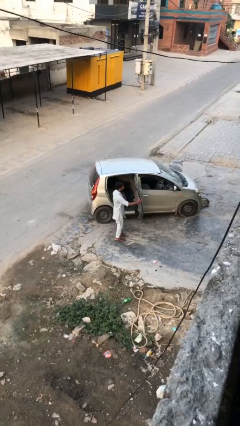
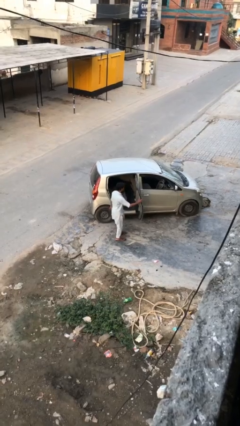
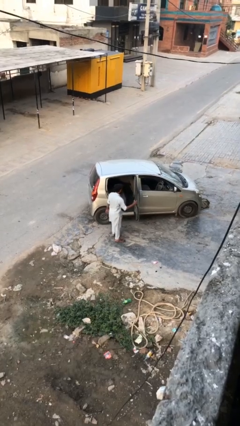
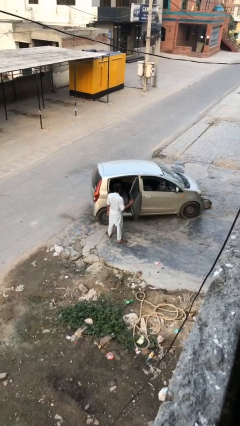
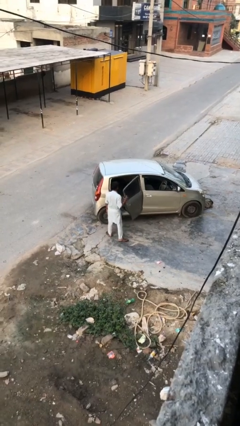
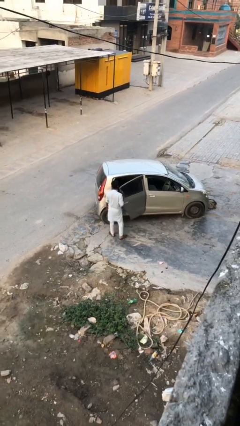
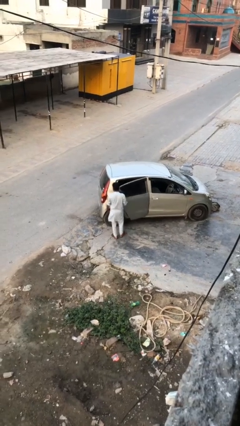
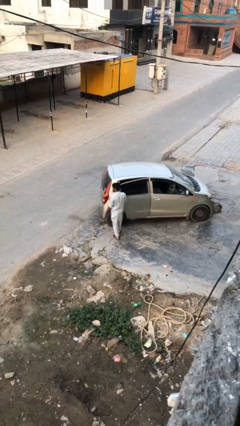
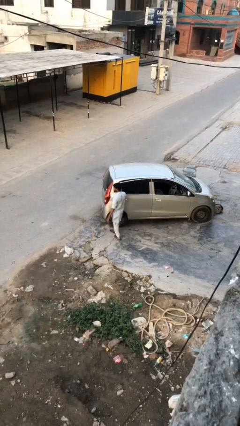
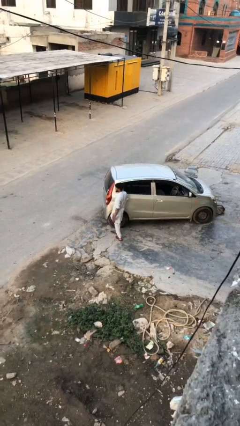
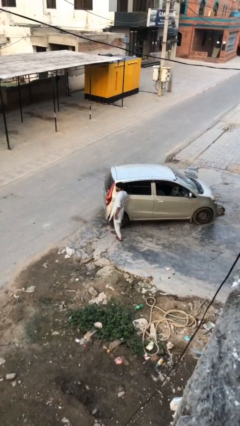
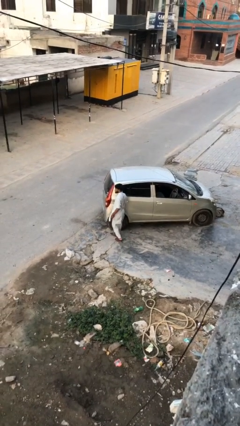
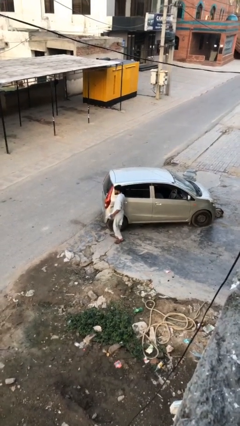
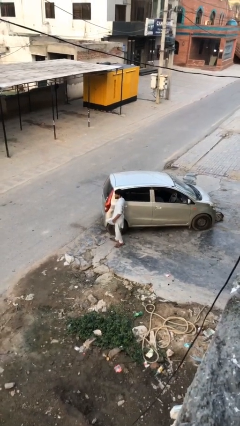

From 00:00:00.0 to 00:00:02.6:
person closes car door

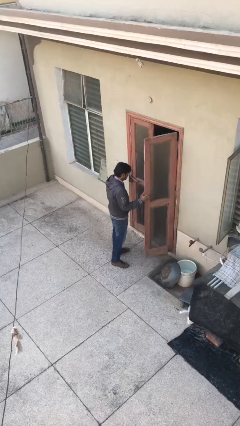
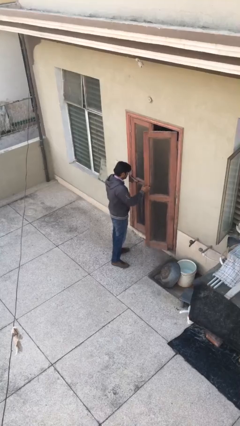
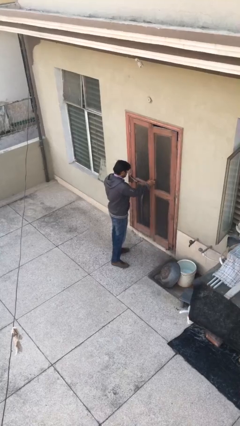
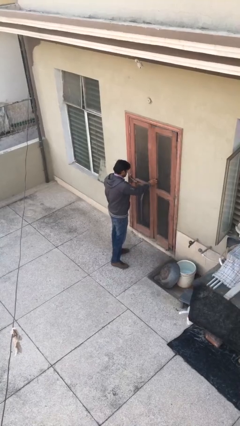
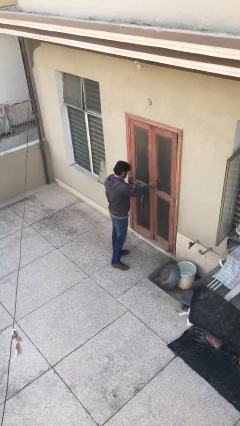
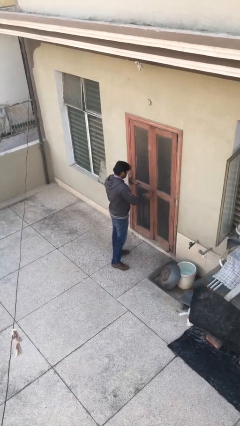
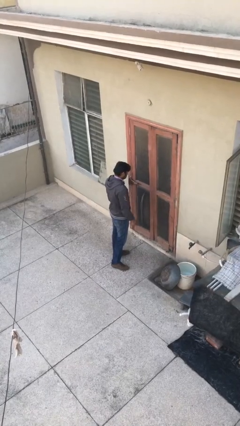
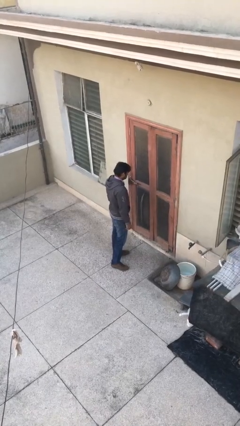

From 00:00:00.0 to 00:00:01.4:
person closes facility door

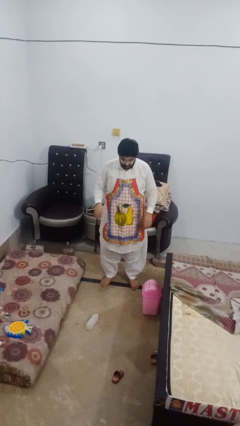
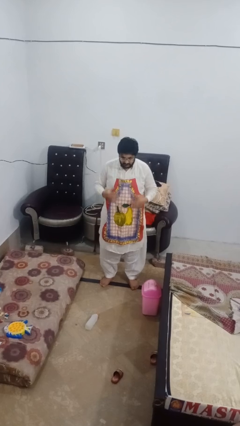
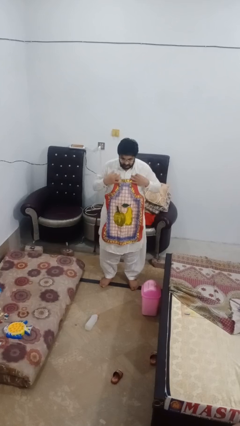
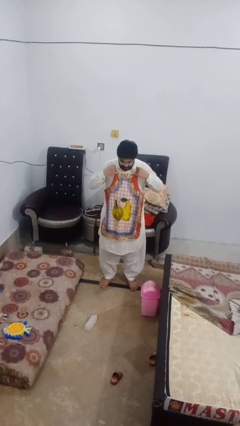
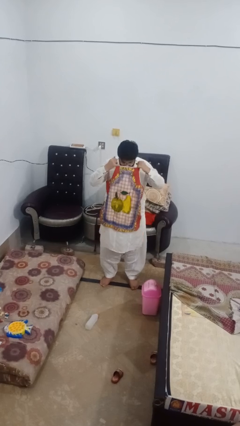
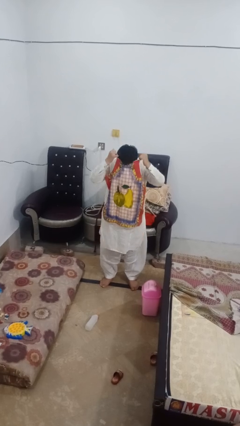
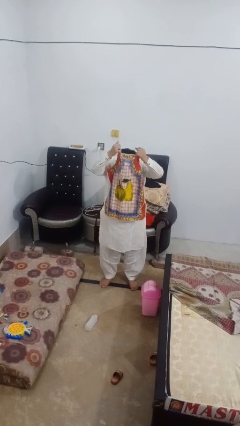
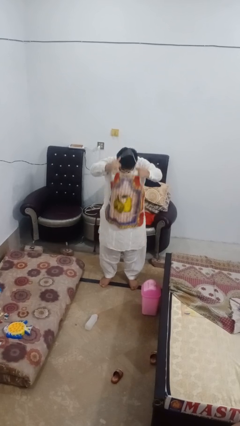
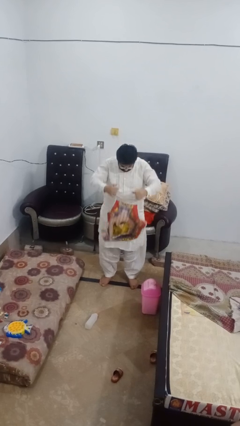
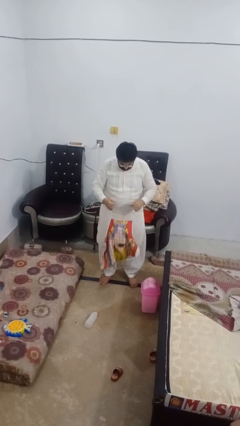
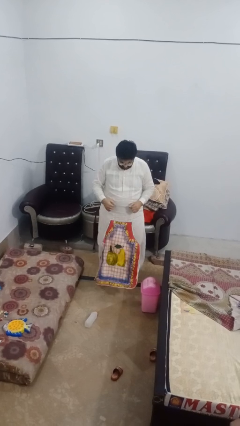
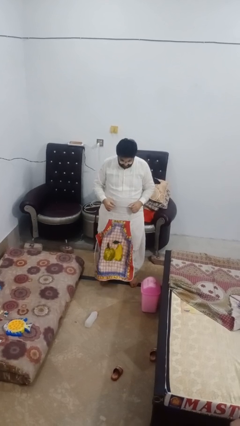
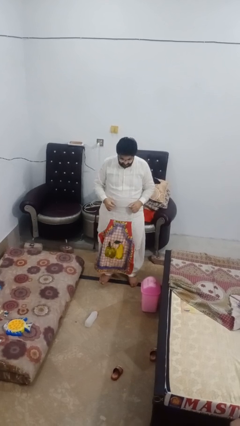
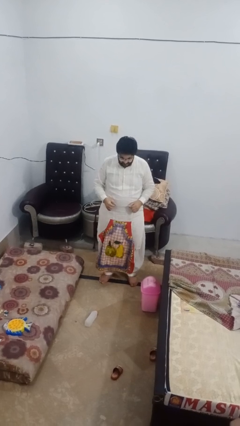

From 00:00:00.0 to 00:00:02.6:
person takes off apron

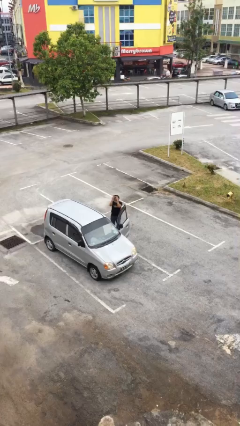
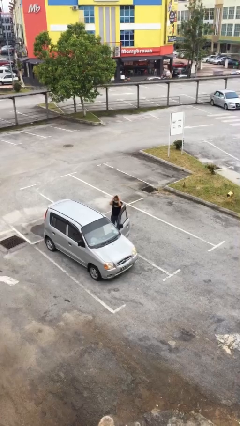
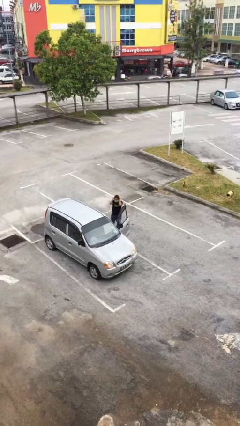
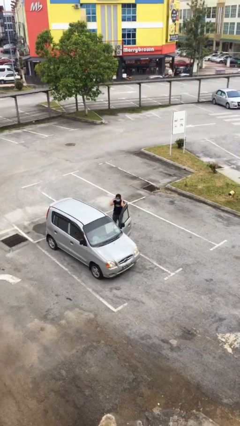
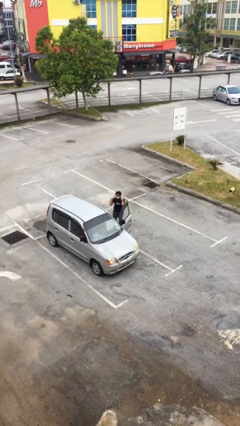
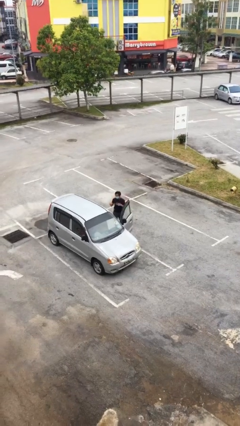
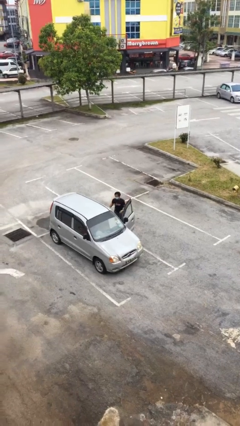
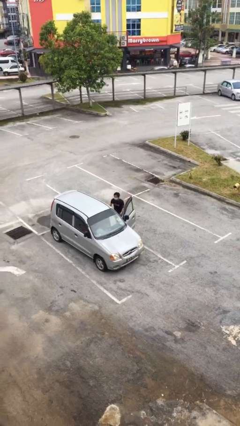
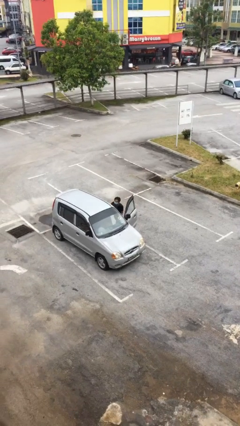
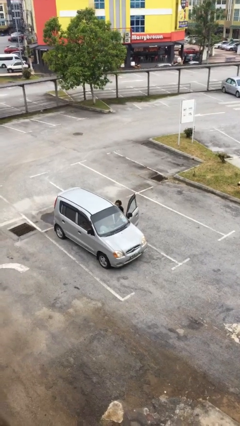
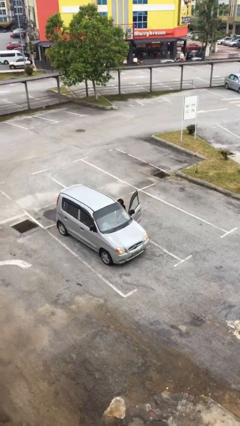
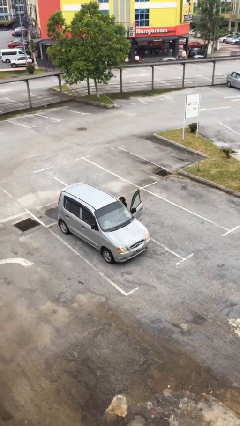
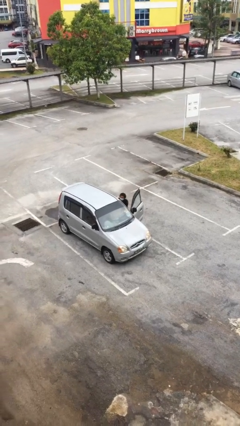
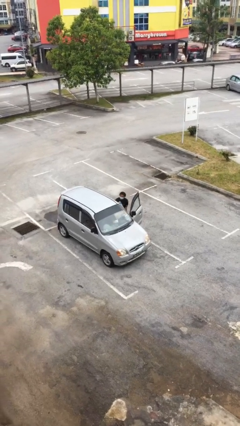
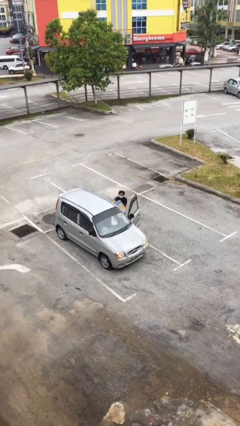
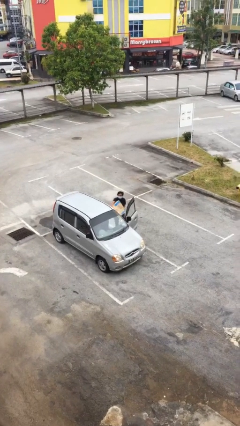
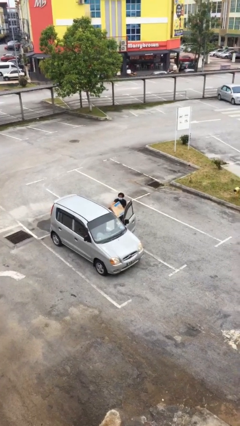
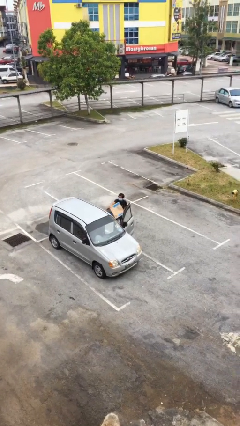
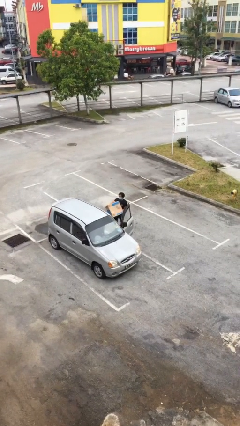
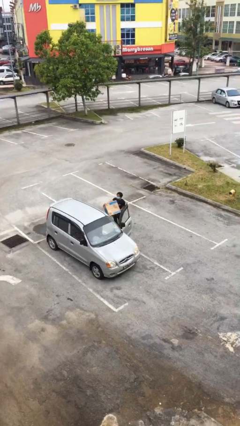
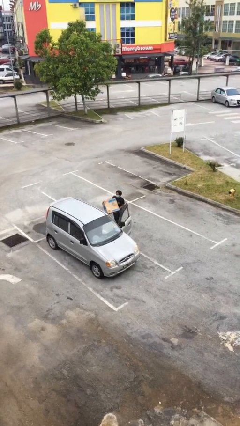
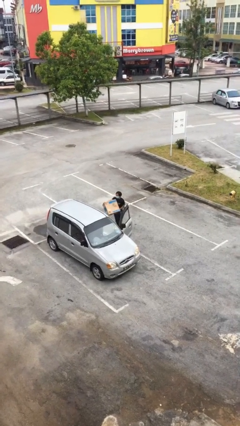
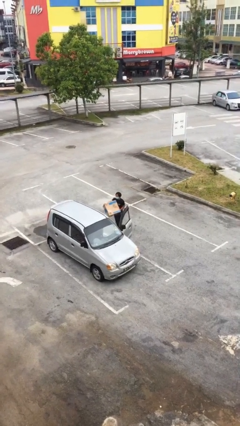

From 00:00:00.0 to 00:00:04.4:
person unloads car

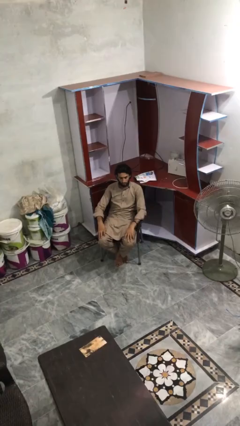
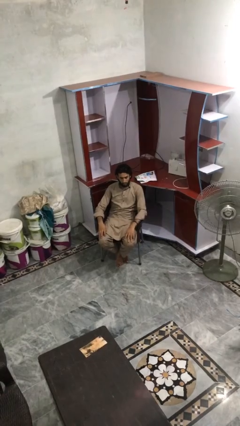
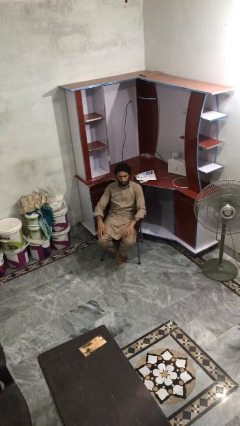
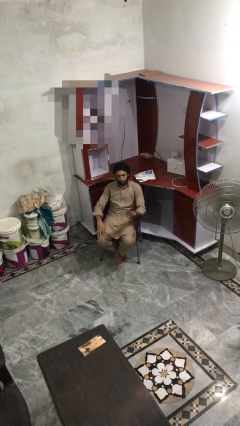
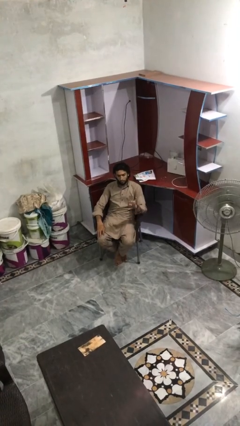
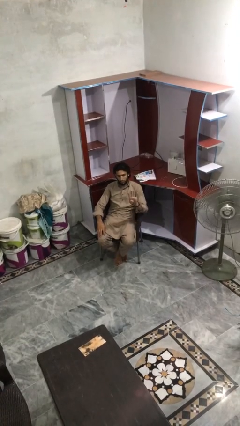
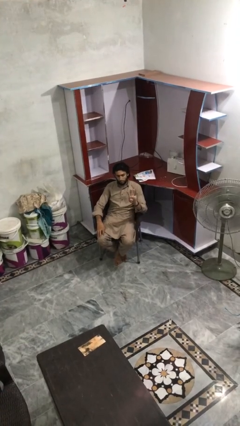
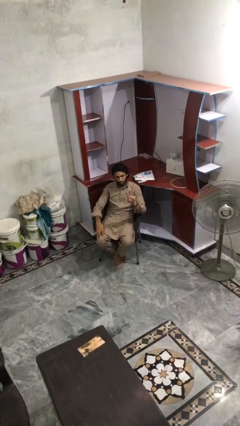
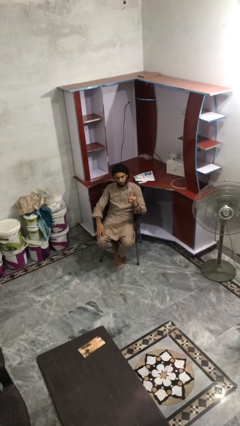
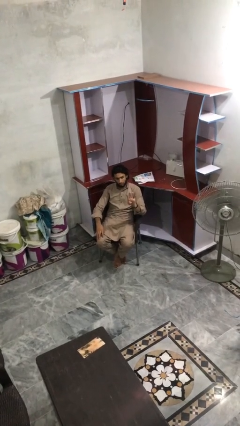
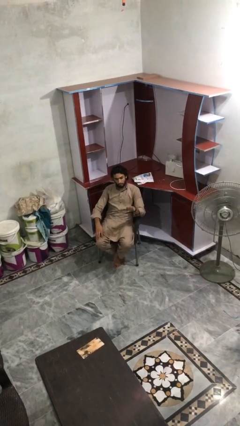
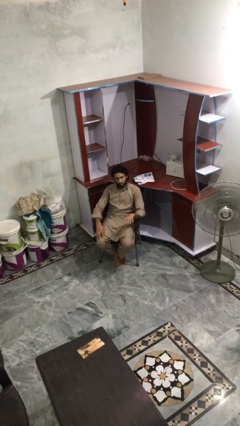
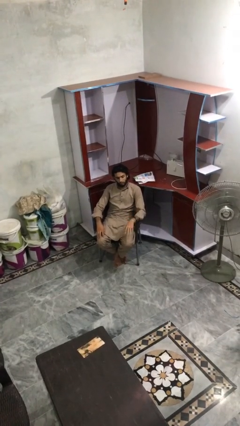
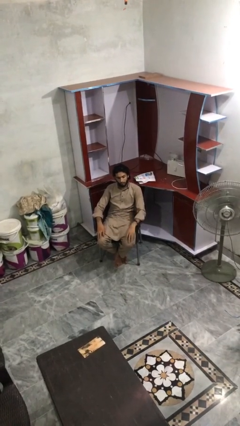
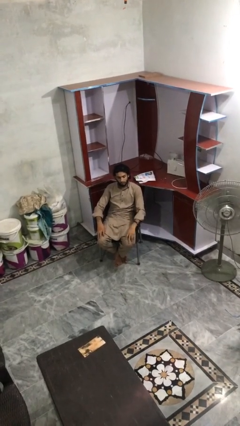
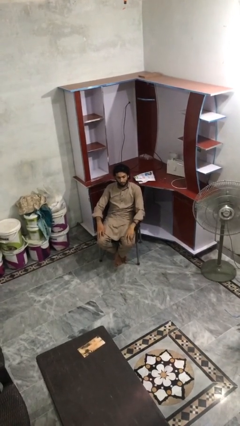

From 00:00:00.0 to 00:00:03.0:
person gestures number four

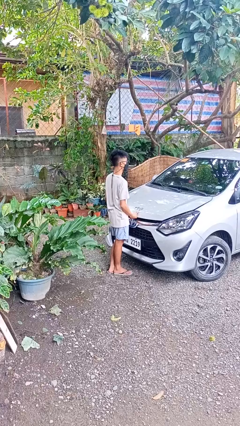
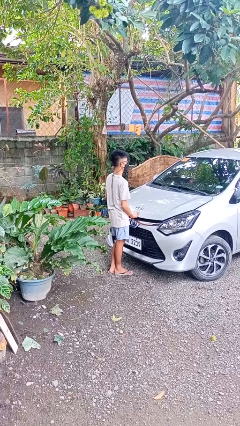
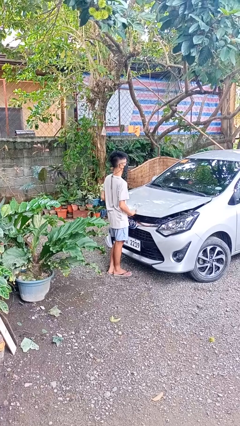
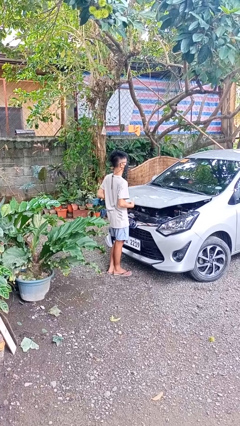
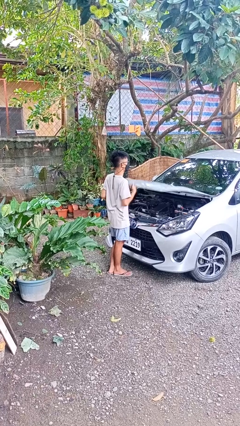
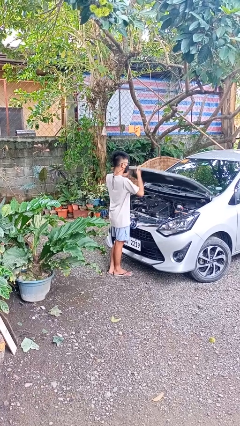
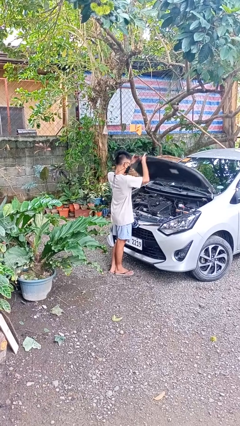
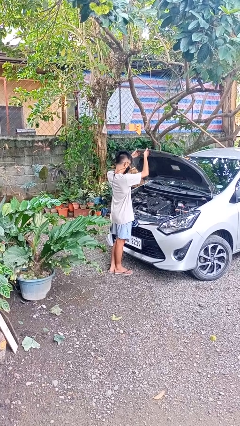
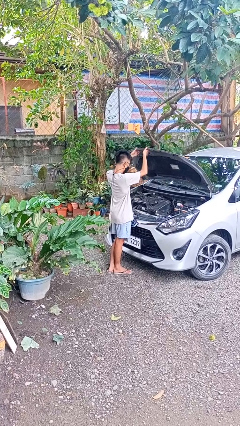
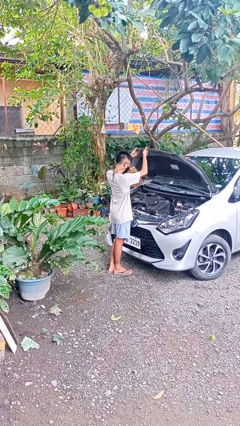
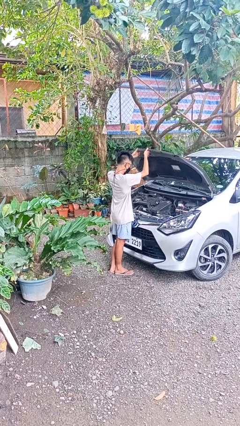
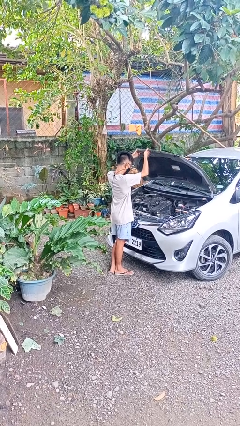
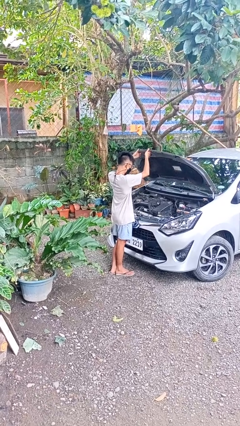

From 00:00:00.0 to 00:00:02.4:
person opens car hood

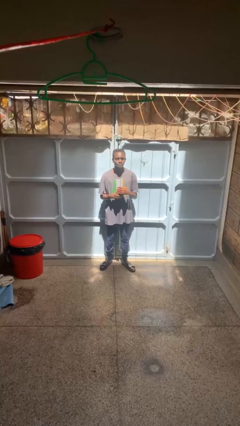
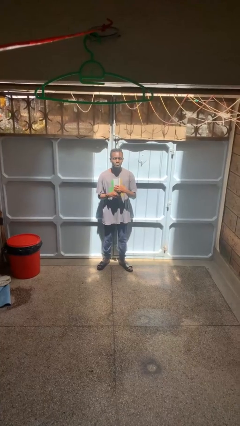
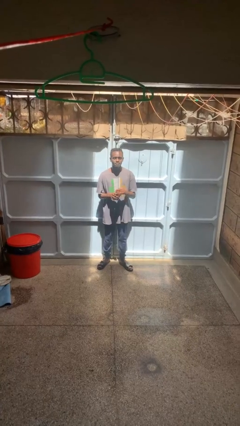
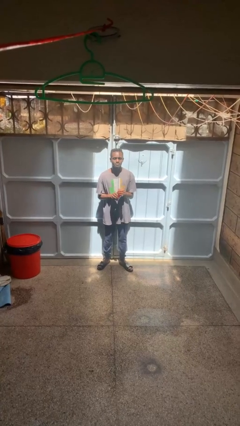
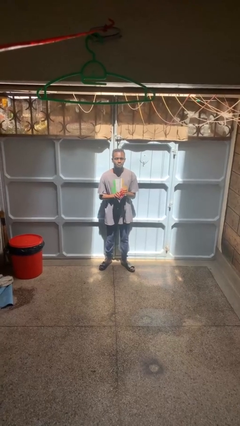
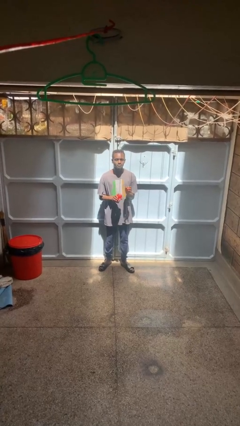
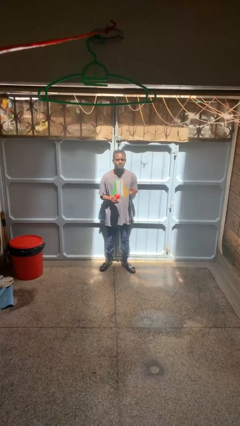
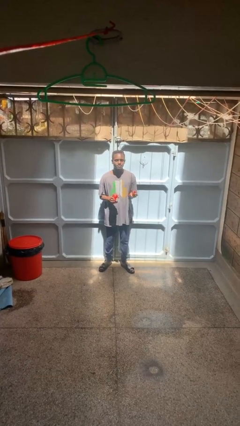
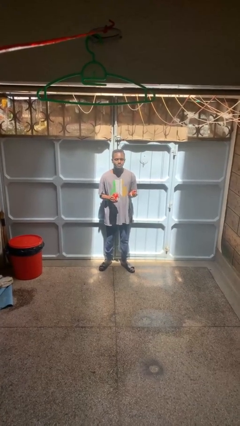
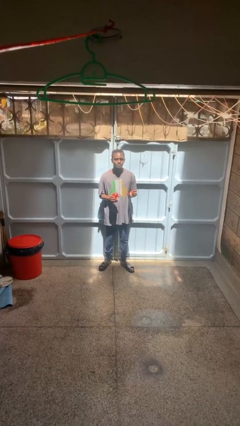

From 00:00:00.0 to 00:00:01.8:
person opens jar
